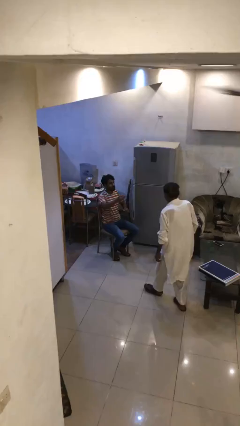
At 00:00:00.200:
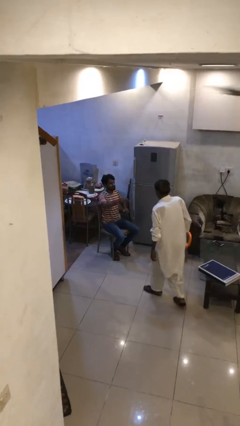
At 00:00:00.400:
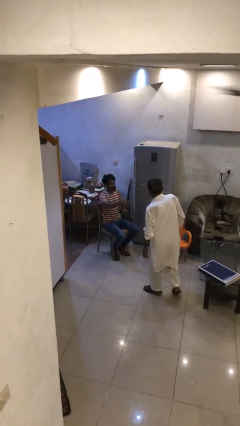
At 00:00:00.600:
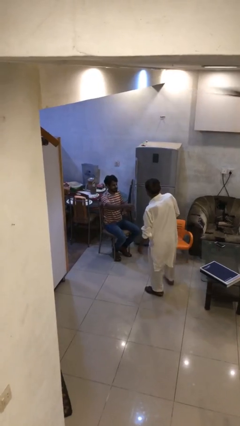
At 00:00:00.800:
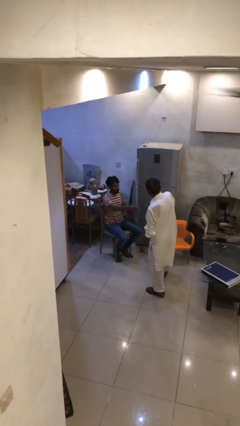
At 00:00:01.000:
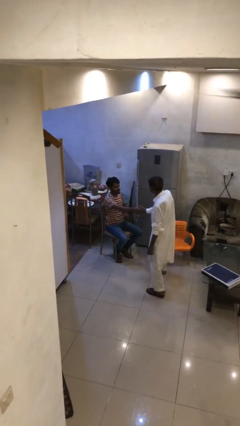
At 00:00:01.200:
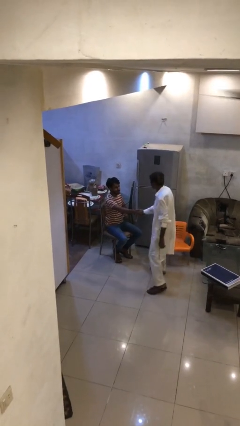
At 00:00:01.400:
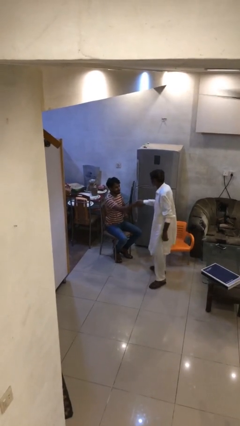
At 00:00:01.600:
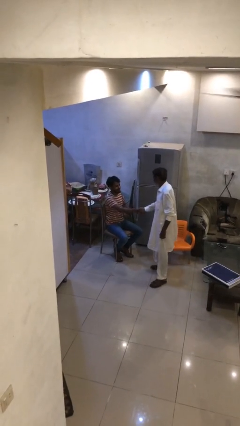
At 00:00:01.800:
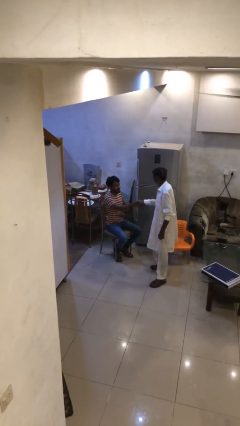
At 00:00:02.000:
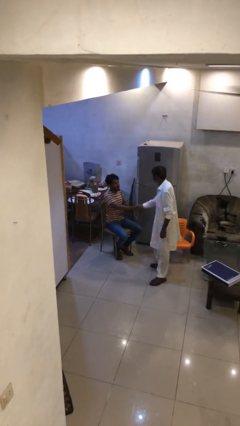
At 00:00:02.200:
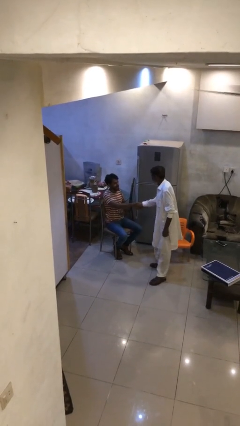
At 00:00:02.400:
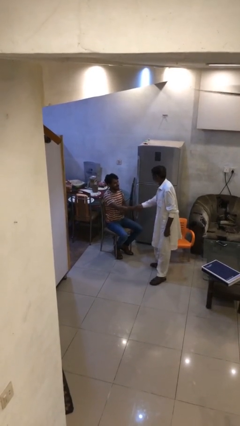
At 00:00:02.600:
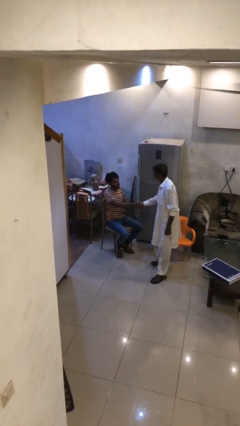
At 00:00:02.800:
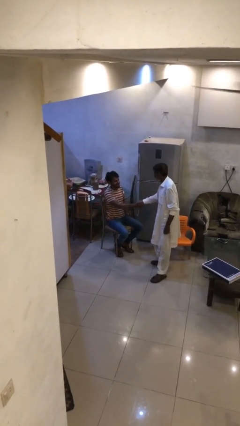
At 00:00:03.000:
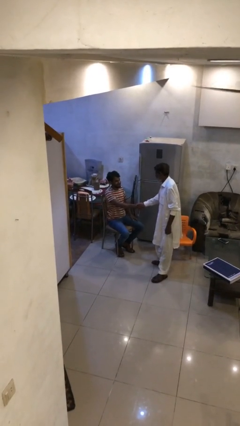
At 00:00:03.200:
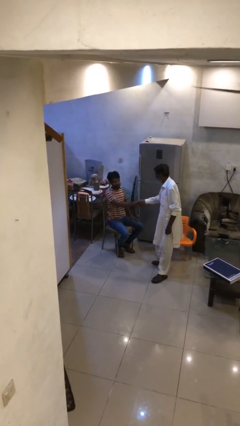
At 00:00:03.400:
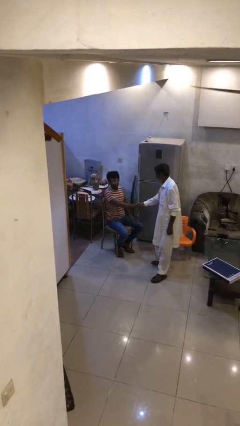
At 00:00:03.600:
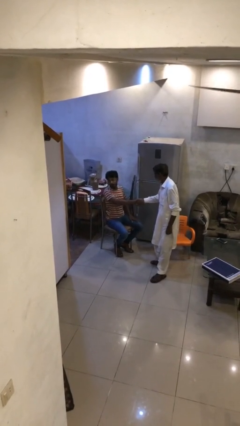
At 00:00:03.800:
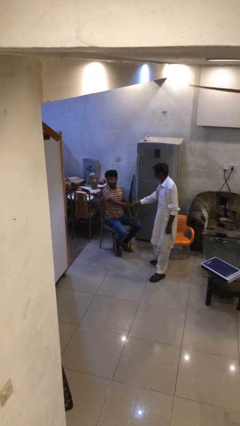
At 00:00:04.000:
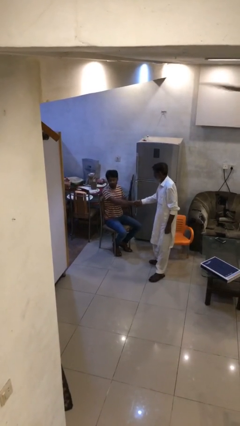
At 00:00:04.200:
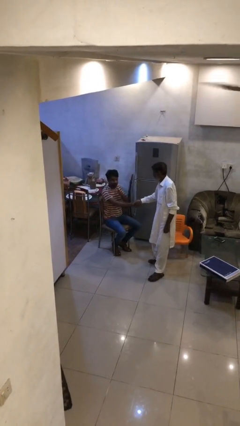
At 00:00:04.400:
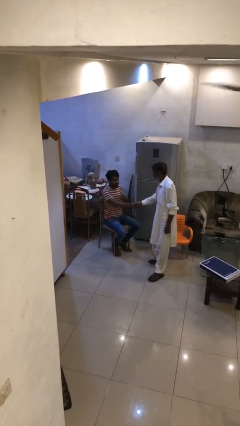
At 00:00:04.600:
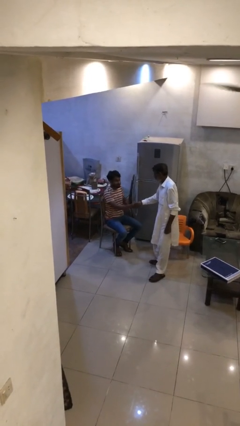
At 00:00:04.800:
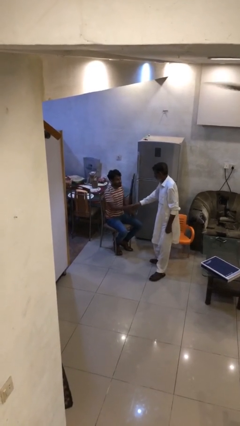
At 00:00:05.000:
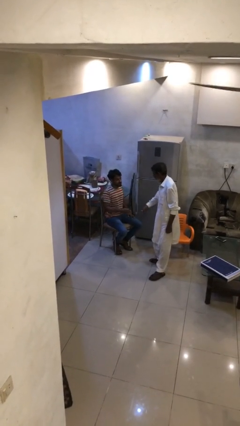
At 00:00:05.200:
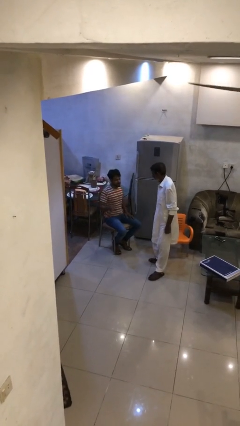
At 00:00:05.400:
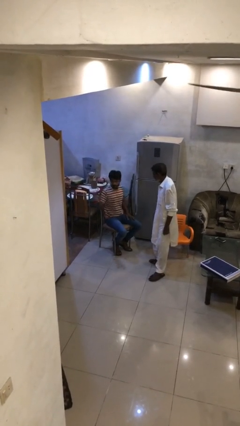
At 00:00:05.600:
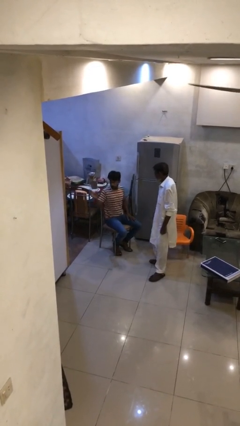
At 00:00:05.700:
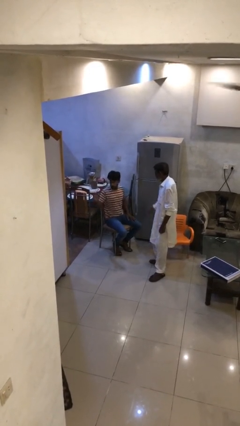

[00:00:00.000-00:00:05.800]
person shakes hand

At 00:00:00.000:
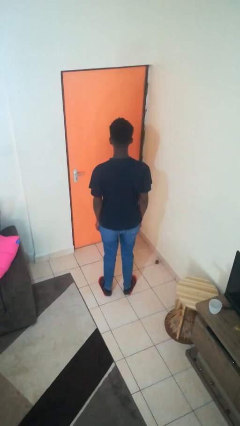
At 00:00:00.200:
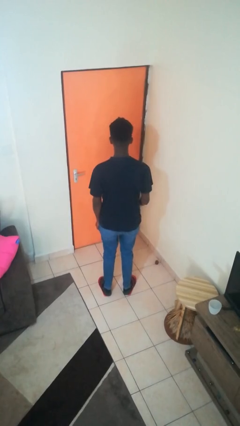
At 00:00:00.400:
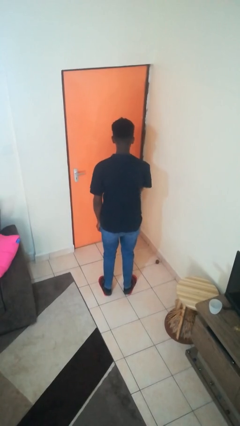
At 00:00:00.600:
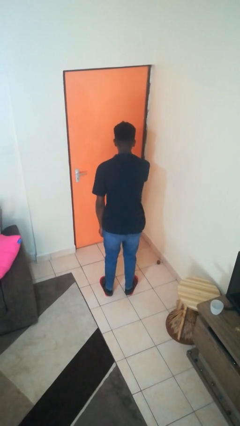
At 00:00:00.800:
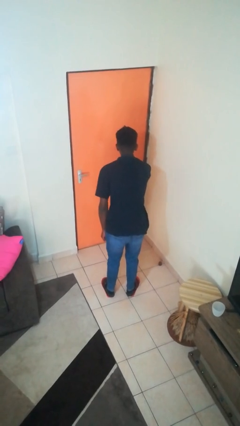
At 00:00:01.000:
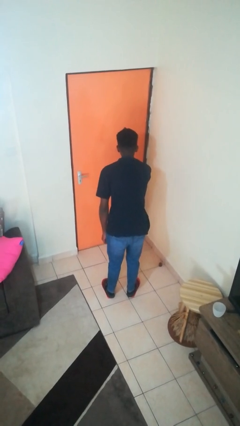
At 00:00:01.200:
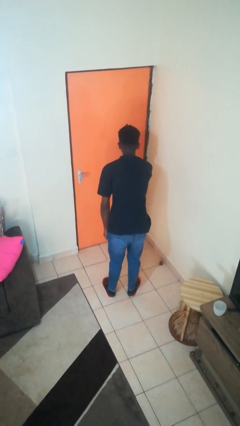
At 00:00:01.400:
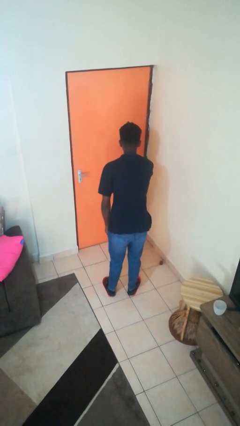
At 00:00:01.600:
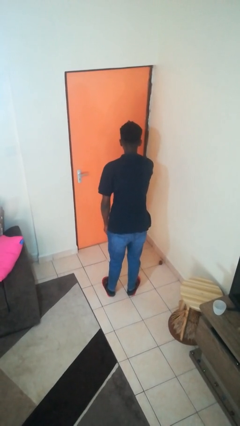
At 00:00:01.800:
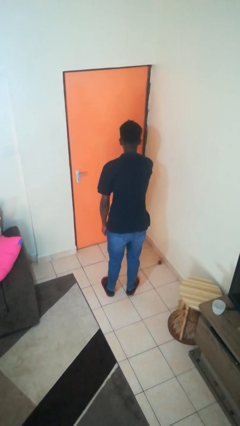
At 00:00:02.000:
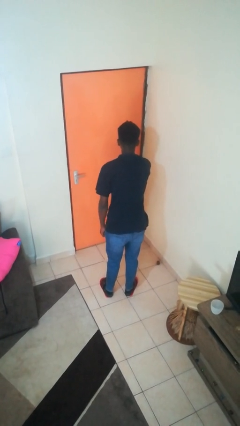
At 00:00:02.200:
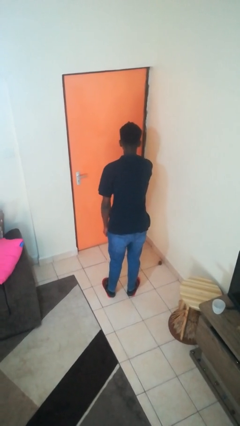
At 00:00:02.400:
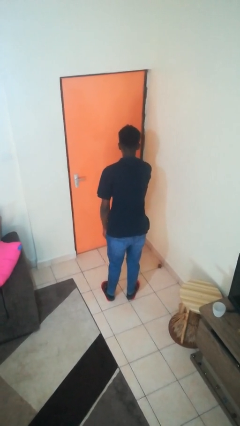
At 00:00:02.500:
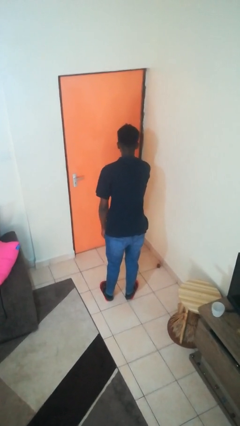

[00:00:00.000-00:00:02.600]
person gestures watch closely

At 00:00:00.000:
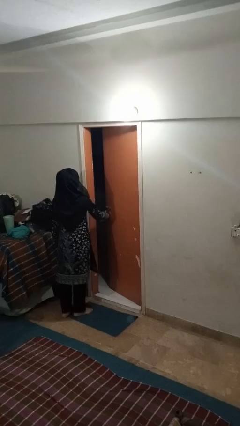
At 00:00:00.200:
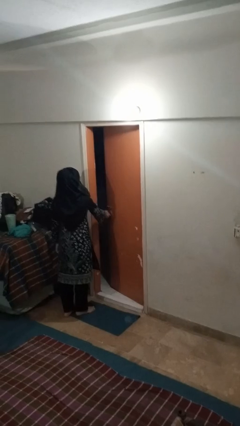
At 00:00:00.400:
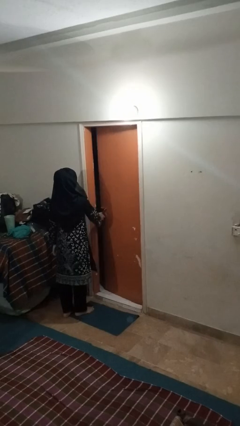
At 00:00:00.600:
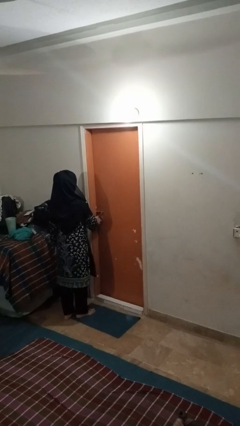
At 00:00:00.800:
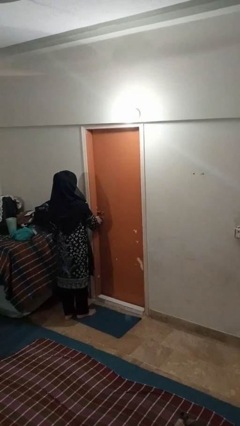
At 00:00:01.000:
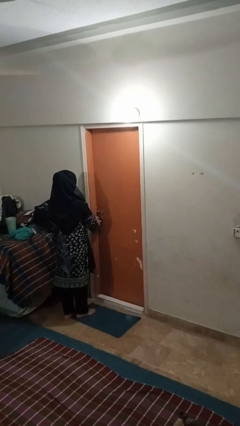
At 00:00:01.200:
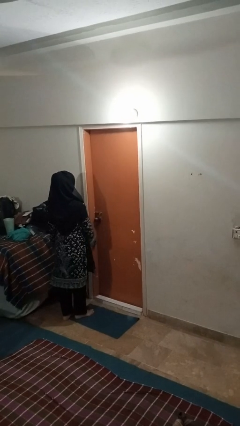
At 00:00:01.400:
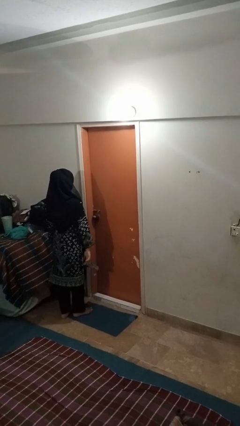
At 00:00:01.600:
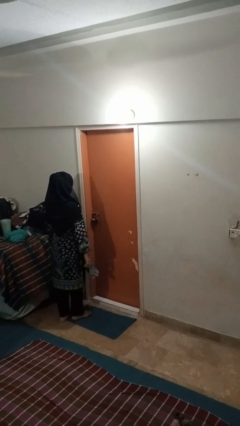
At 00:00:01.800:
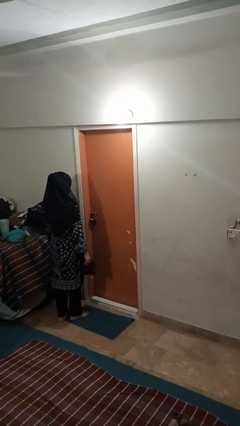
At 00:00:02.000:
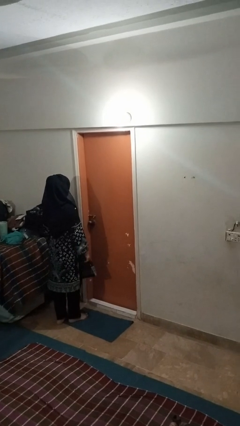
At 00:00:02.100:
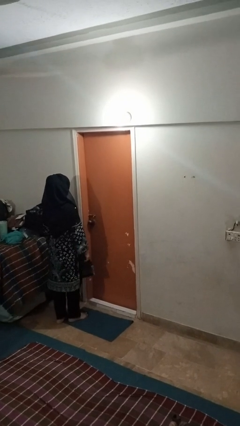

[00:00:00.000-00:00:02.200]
person closes facility door

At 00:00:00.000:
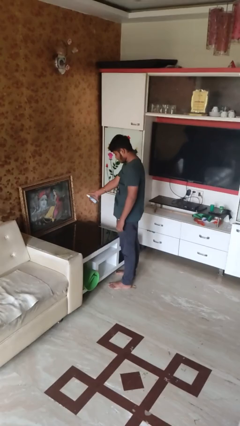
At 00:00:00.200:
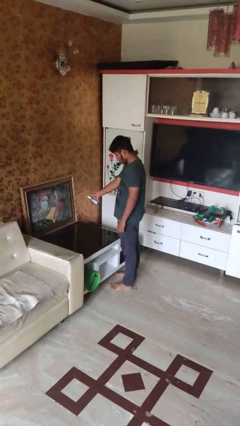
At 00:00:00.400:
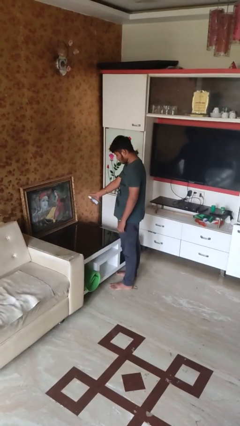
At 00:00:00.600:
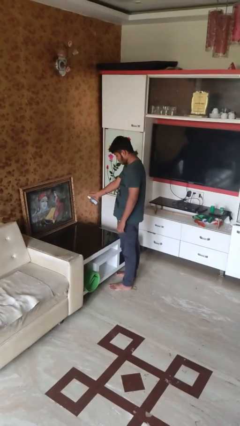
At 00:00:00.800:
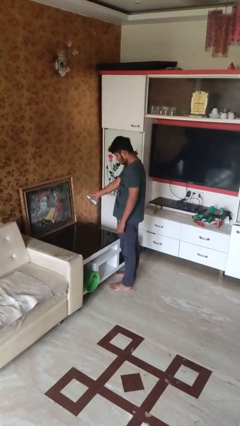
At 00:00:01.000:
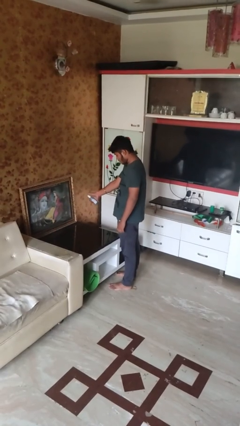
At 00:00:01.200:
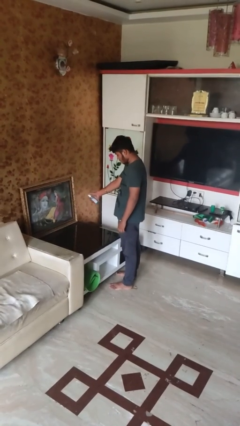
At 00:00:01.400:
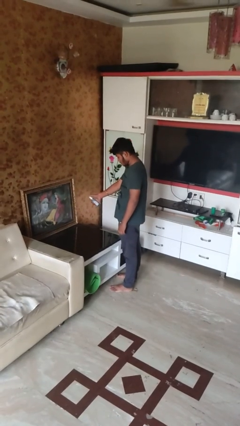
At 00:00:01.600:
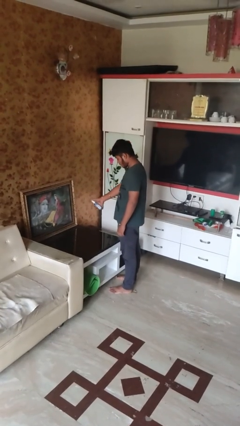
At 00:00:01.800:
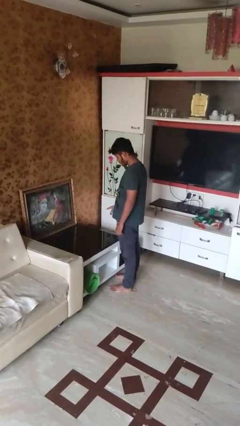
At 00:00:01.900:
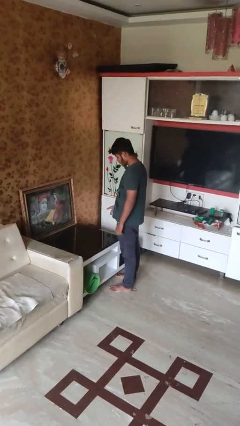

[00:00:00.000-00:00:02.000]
person sprays from bottle

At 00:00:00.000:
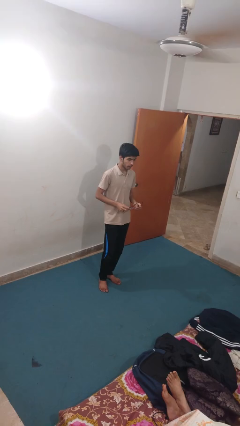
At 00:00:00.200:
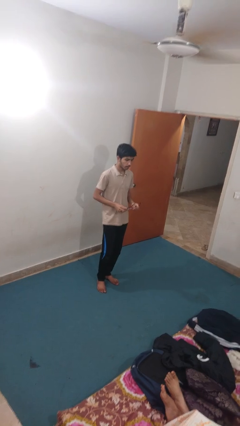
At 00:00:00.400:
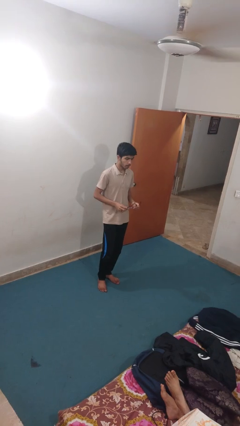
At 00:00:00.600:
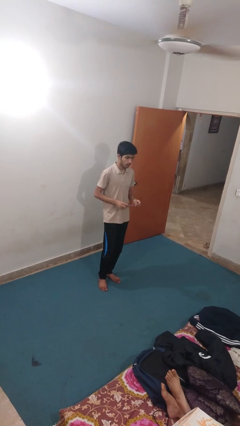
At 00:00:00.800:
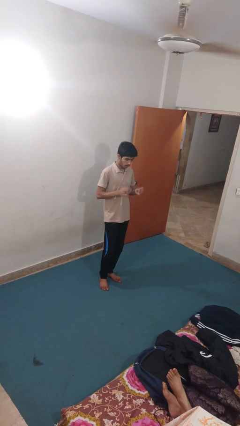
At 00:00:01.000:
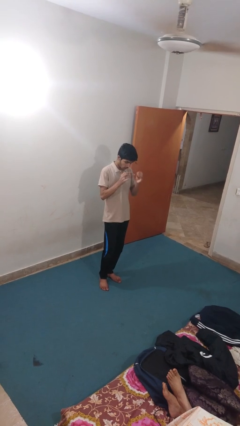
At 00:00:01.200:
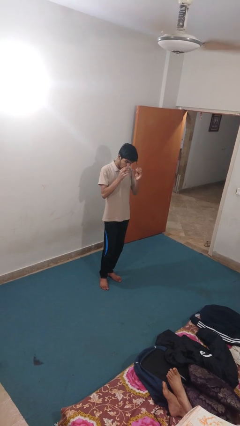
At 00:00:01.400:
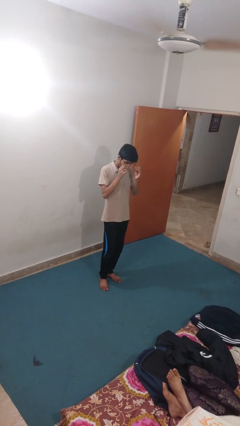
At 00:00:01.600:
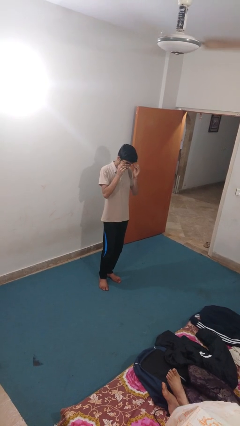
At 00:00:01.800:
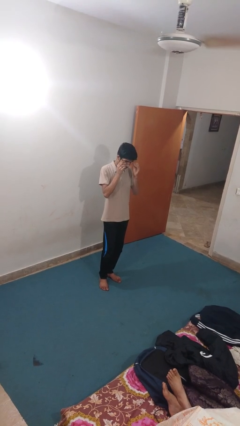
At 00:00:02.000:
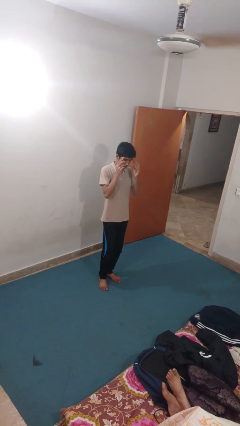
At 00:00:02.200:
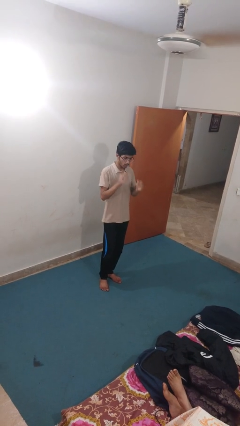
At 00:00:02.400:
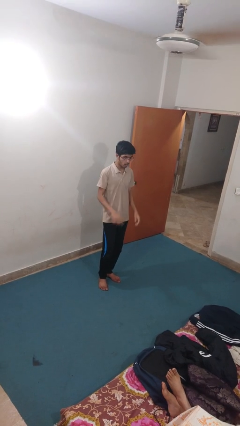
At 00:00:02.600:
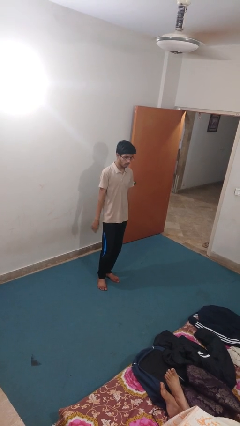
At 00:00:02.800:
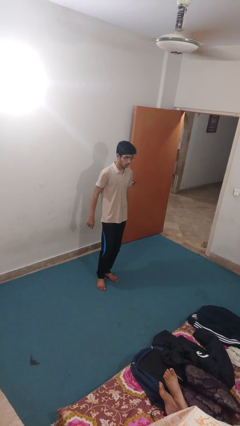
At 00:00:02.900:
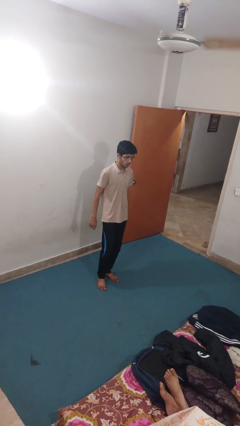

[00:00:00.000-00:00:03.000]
person puts on glasses

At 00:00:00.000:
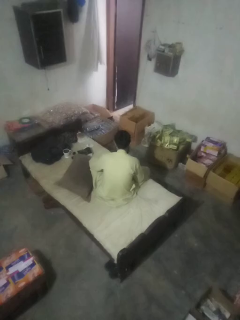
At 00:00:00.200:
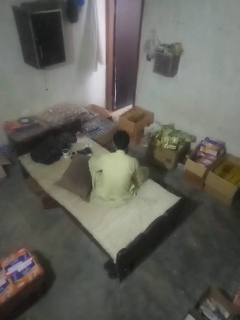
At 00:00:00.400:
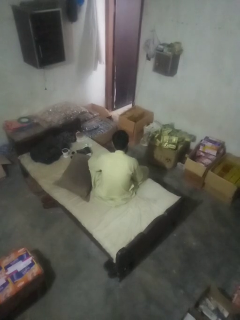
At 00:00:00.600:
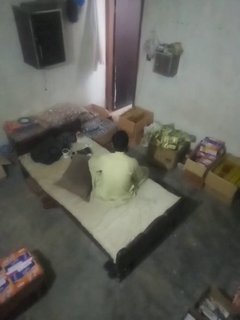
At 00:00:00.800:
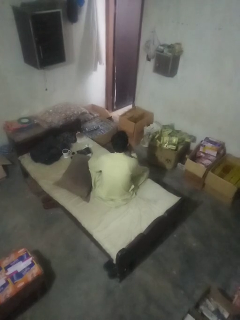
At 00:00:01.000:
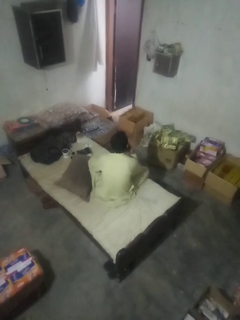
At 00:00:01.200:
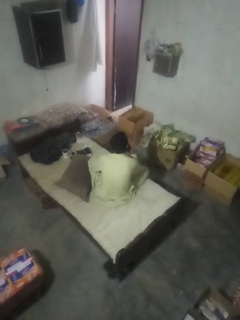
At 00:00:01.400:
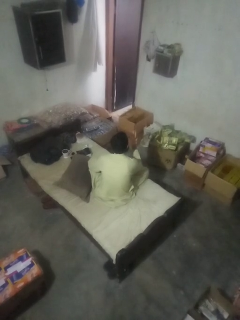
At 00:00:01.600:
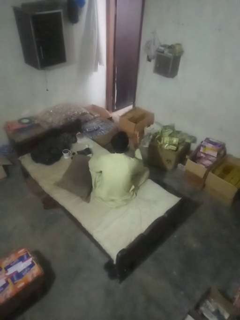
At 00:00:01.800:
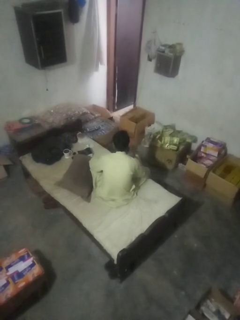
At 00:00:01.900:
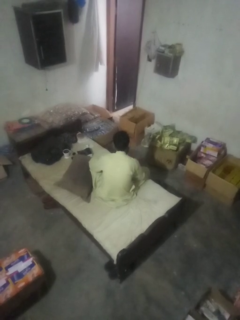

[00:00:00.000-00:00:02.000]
person gestures blow kiss
